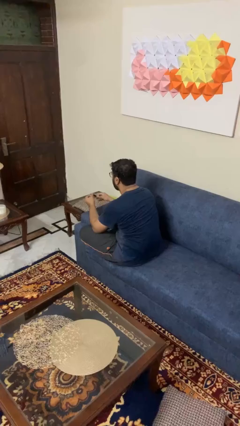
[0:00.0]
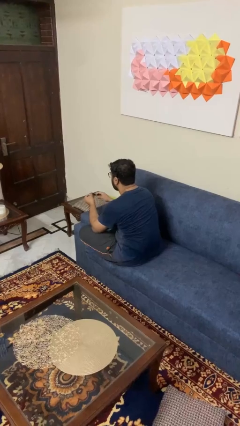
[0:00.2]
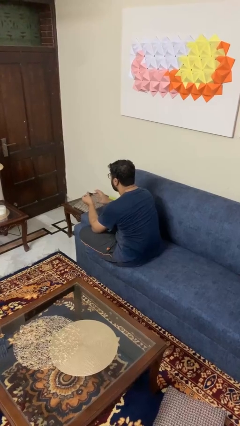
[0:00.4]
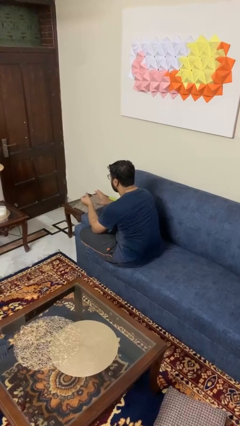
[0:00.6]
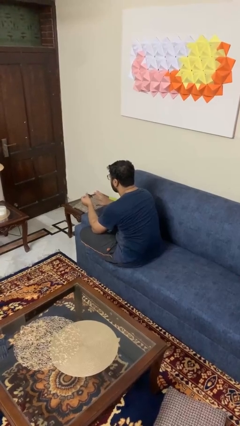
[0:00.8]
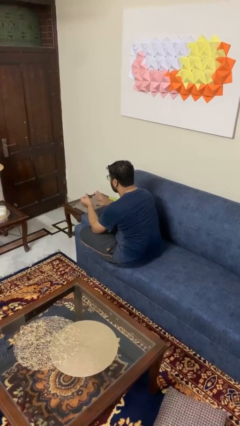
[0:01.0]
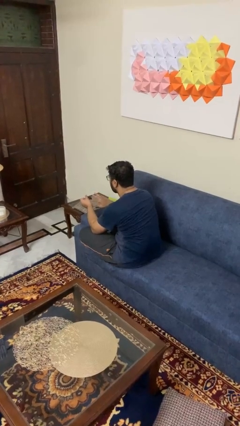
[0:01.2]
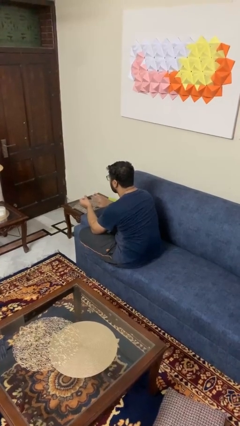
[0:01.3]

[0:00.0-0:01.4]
person clips fingernails

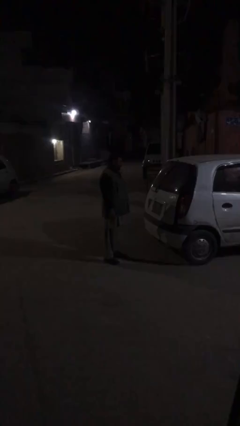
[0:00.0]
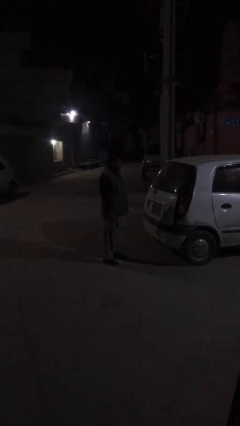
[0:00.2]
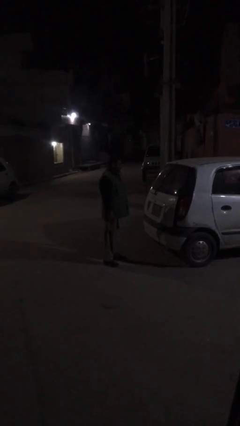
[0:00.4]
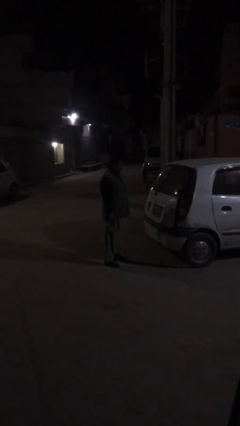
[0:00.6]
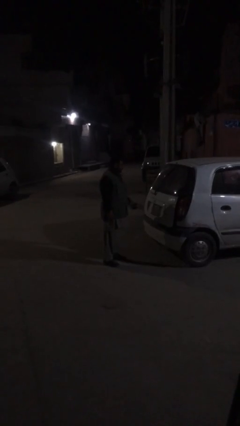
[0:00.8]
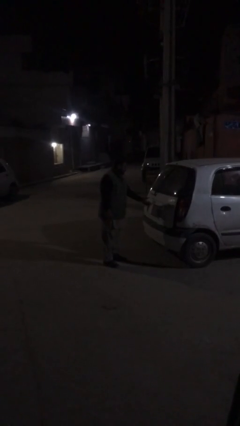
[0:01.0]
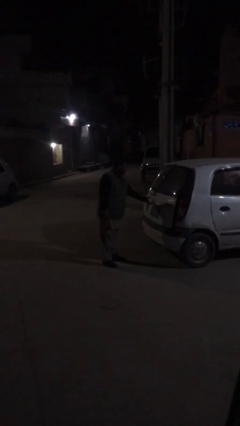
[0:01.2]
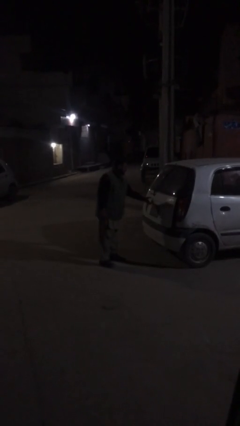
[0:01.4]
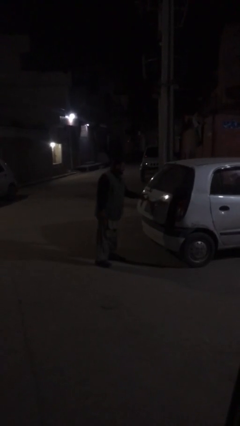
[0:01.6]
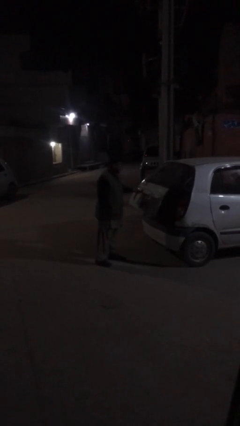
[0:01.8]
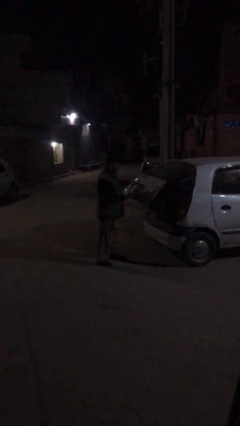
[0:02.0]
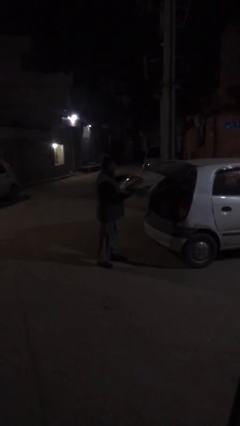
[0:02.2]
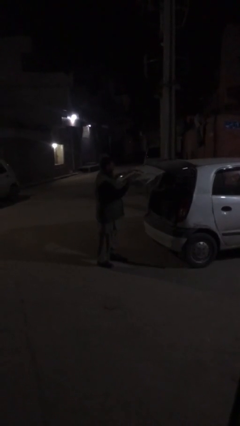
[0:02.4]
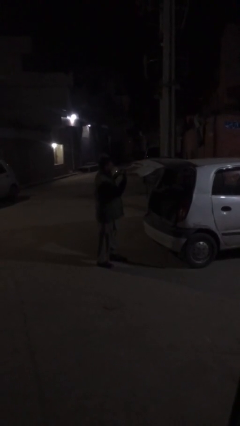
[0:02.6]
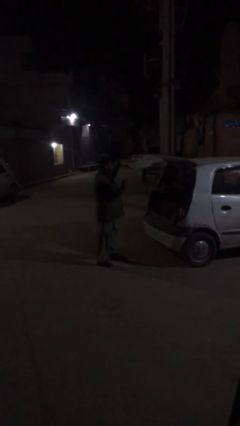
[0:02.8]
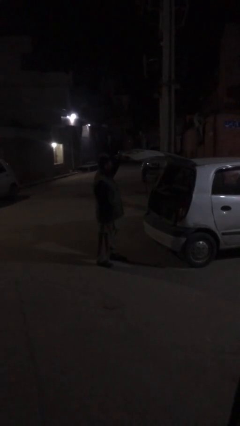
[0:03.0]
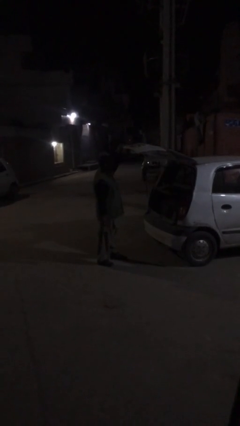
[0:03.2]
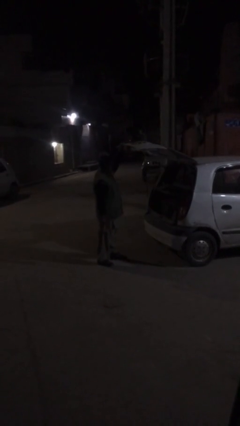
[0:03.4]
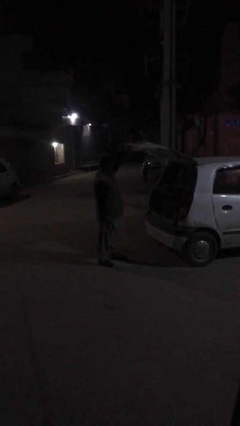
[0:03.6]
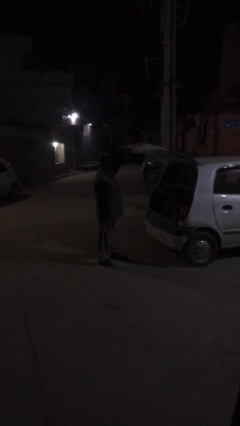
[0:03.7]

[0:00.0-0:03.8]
person opens car trunk

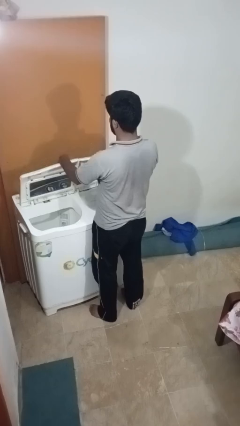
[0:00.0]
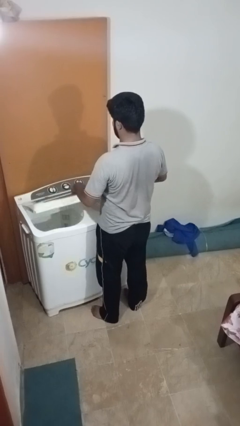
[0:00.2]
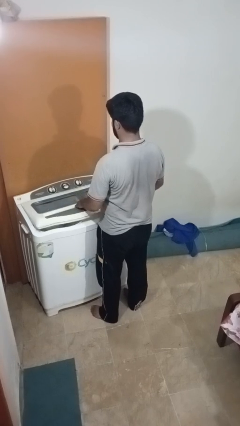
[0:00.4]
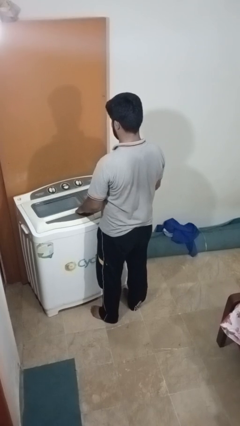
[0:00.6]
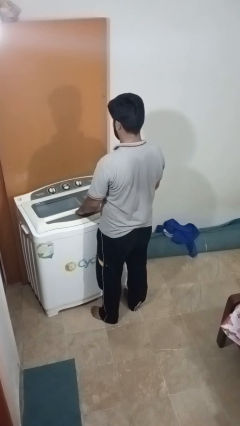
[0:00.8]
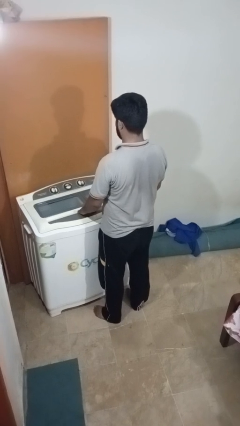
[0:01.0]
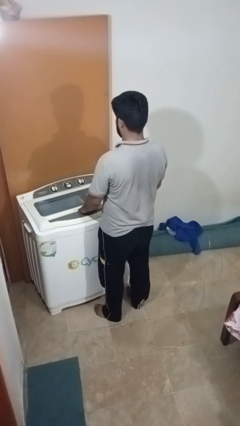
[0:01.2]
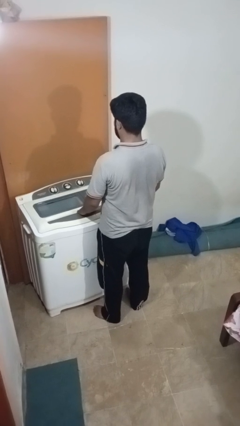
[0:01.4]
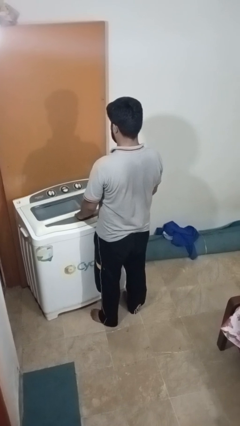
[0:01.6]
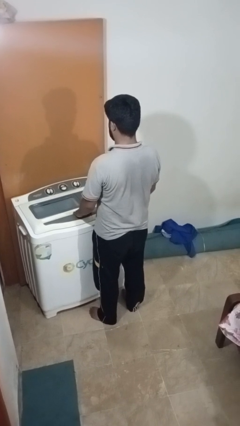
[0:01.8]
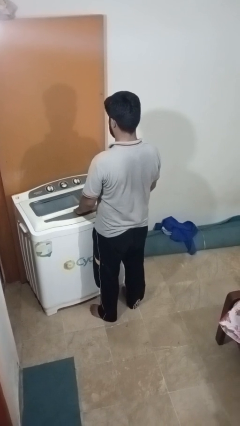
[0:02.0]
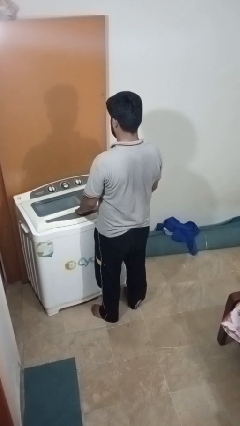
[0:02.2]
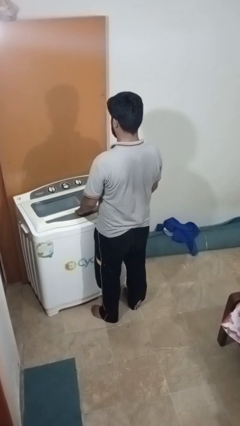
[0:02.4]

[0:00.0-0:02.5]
person closes clothes washer

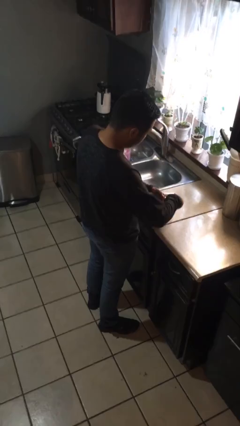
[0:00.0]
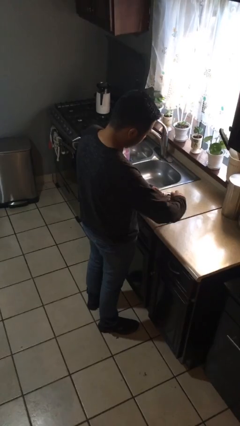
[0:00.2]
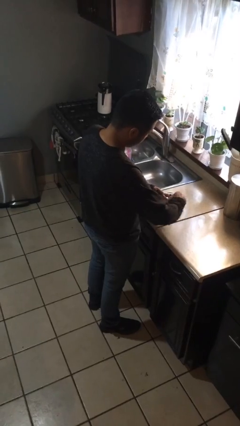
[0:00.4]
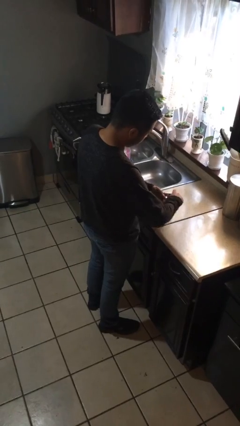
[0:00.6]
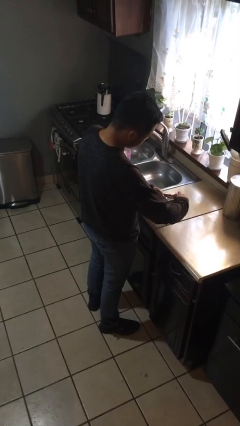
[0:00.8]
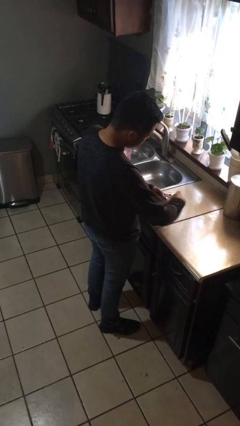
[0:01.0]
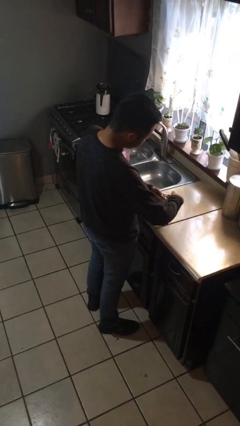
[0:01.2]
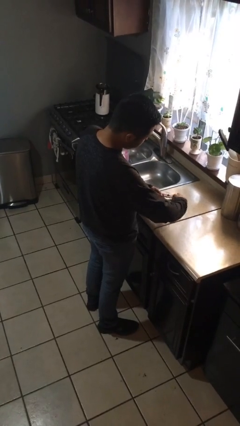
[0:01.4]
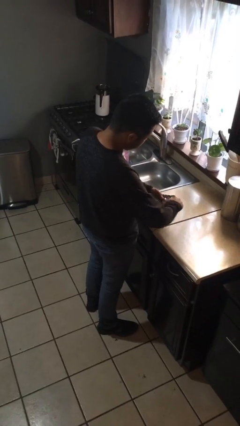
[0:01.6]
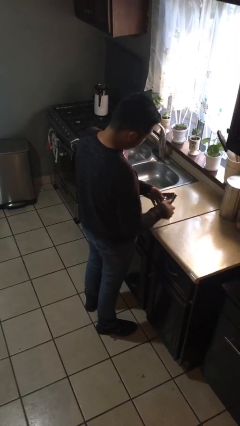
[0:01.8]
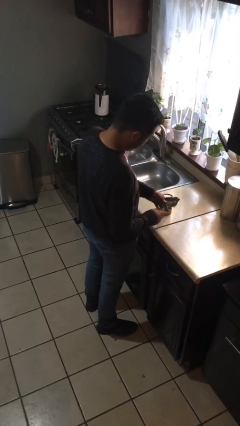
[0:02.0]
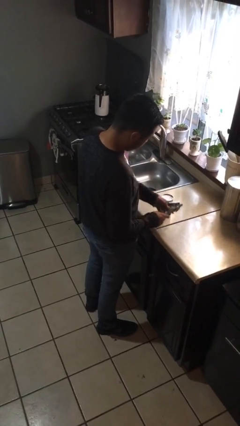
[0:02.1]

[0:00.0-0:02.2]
person opens can with can opener

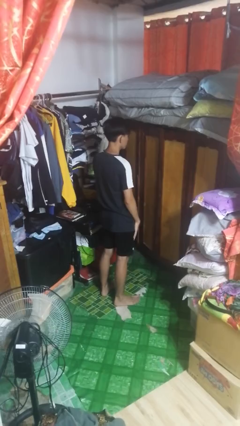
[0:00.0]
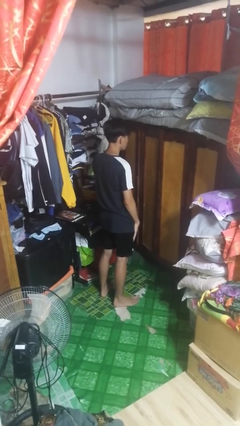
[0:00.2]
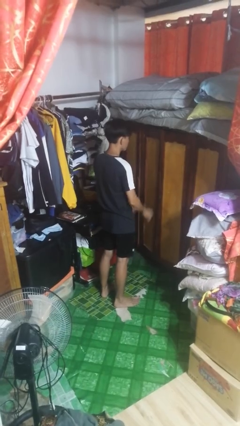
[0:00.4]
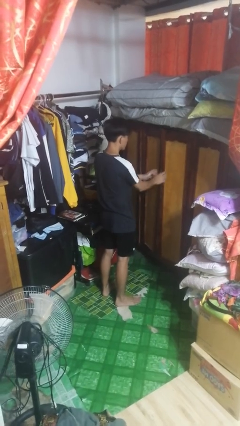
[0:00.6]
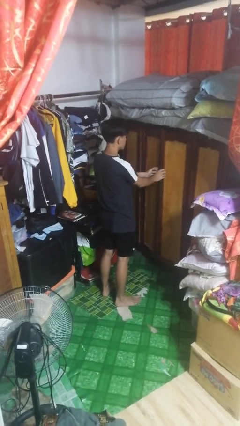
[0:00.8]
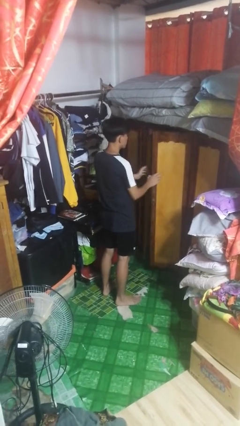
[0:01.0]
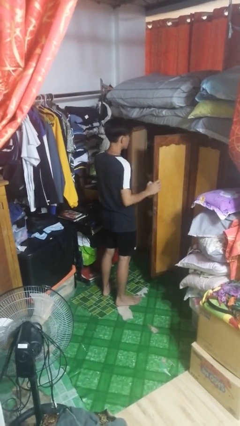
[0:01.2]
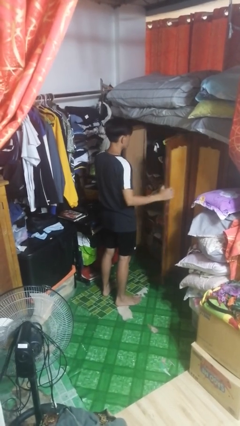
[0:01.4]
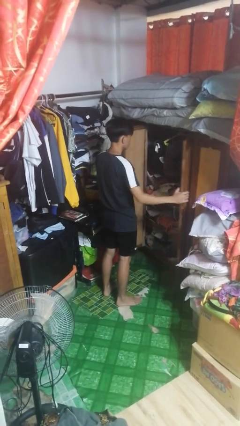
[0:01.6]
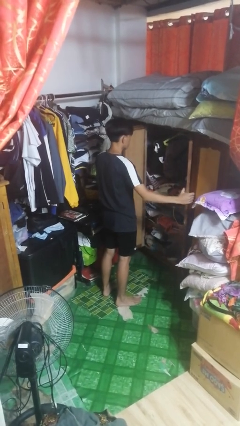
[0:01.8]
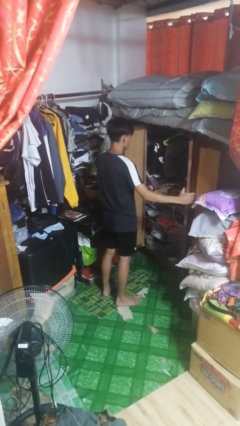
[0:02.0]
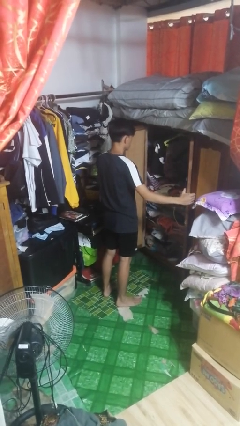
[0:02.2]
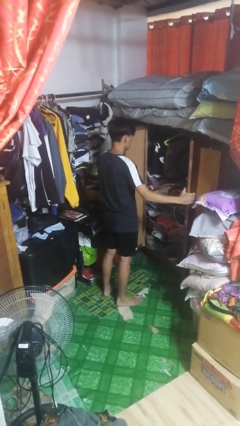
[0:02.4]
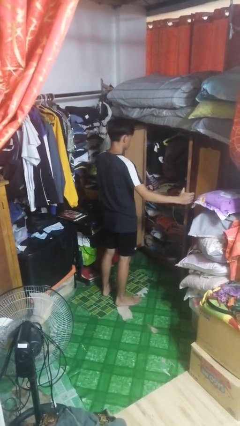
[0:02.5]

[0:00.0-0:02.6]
person opens dresser drawer

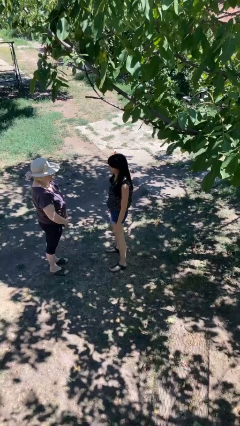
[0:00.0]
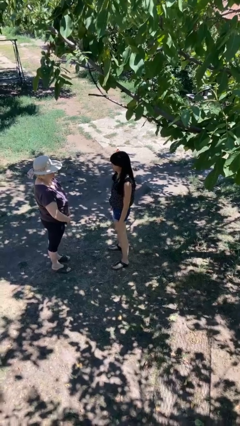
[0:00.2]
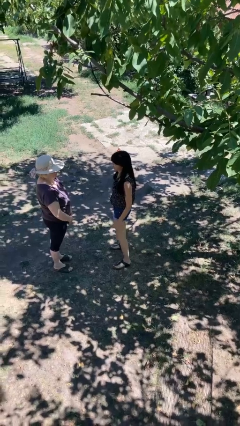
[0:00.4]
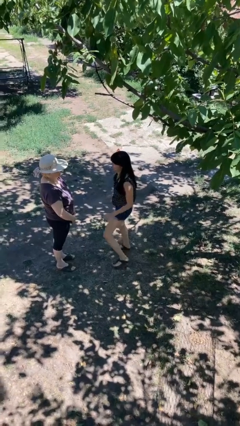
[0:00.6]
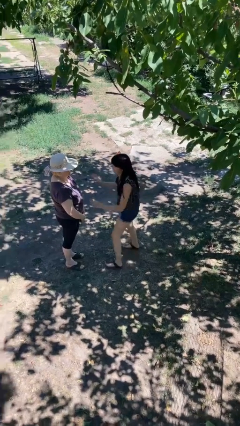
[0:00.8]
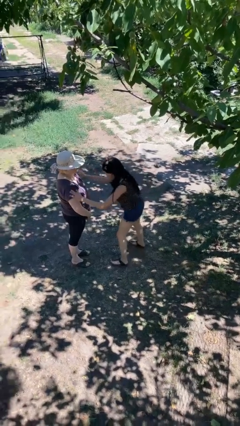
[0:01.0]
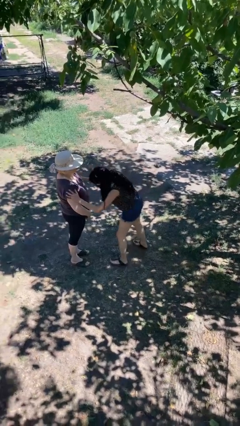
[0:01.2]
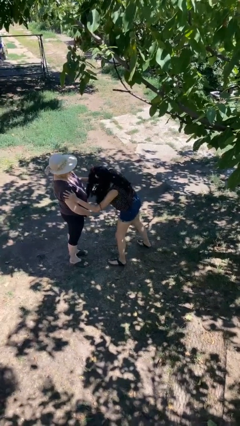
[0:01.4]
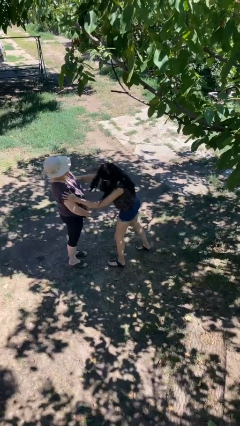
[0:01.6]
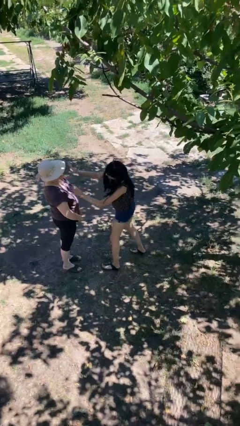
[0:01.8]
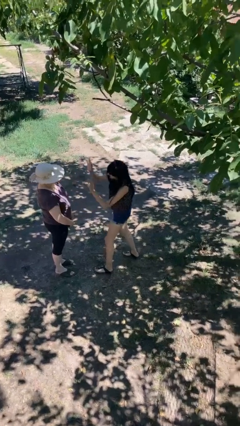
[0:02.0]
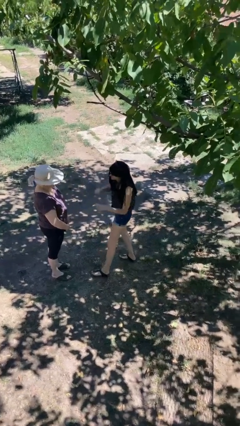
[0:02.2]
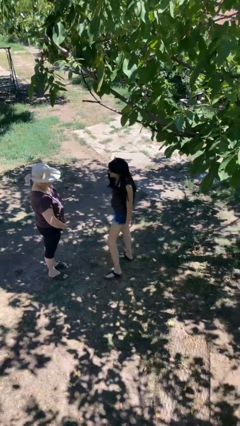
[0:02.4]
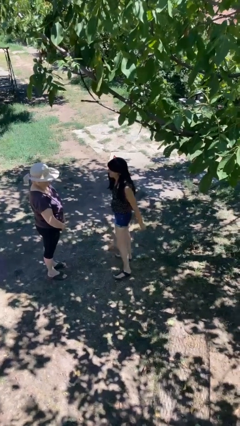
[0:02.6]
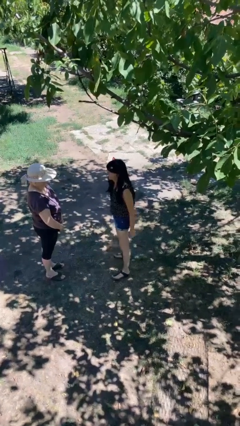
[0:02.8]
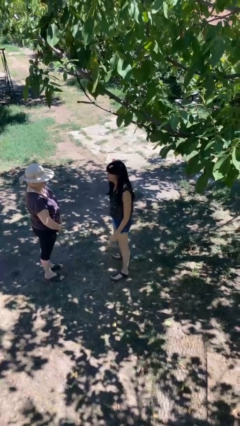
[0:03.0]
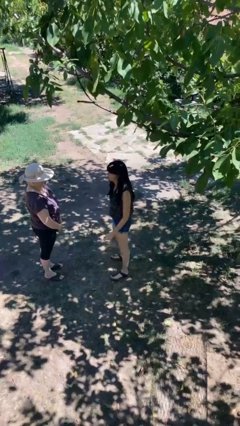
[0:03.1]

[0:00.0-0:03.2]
person shoves person

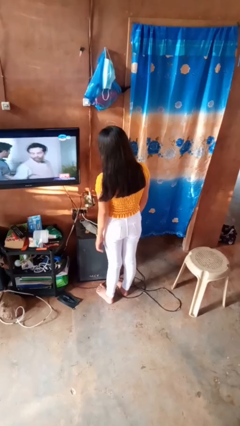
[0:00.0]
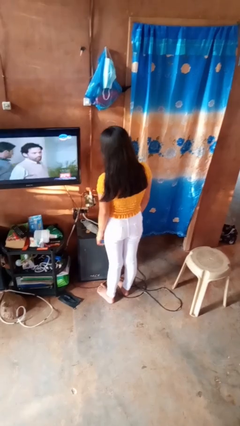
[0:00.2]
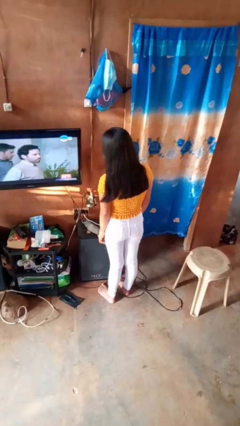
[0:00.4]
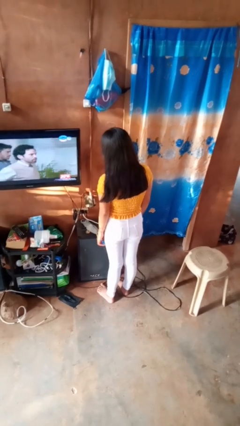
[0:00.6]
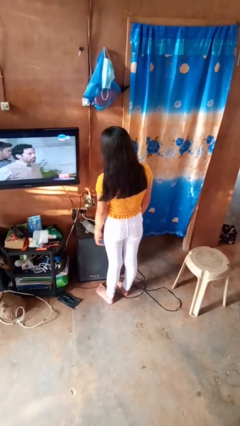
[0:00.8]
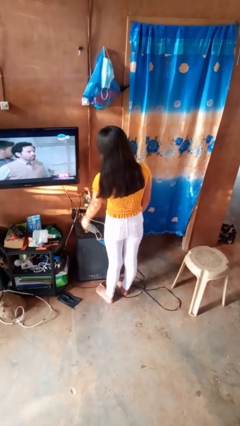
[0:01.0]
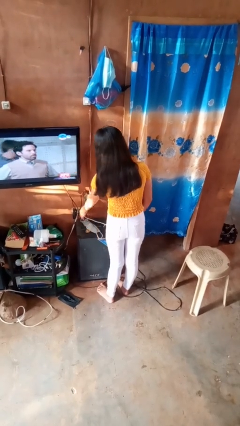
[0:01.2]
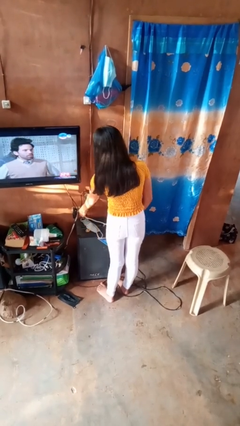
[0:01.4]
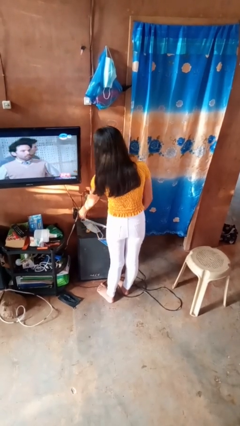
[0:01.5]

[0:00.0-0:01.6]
person unplugs from electrical socket
